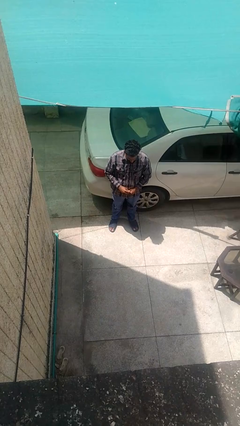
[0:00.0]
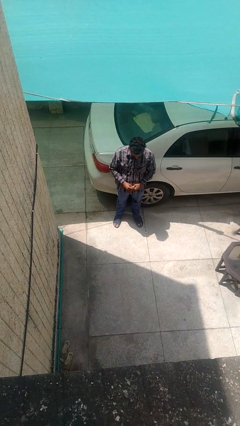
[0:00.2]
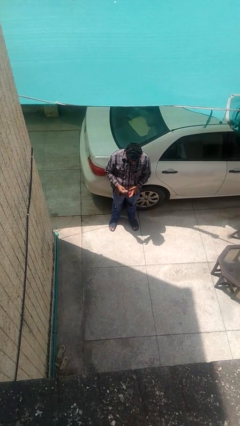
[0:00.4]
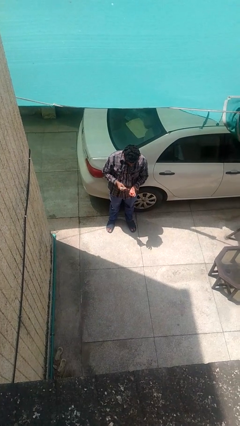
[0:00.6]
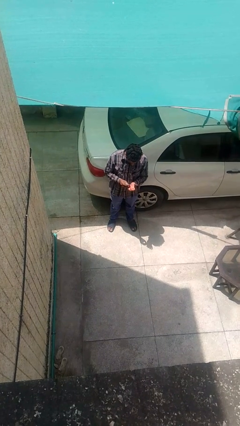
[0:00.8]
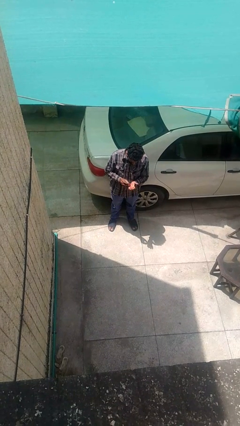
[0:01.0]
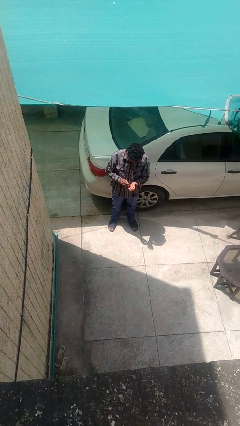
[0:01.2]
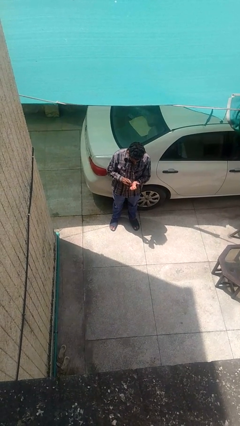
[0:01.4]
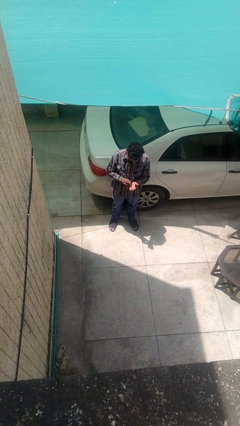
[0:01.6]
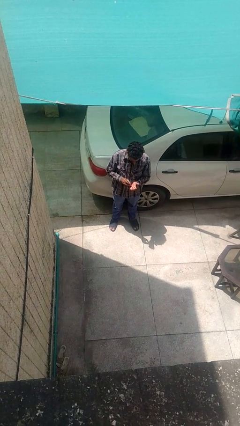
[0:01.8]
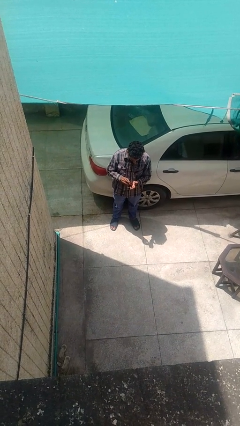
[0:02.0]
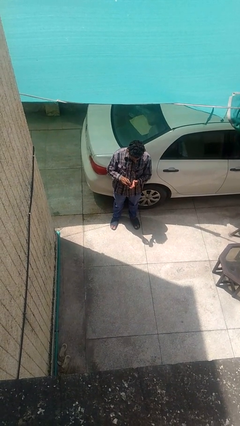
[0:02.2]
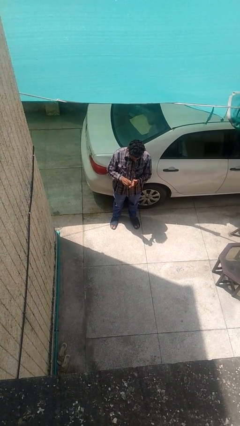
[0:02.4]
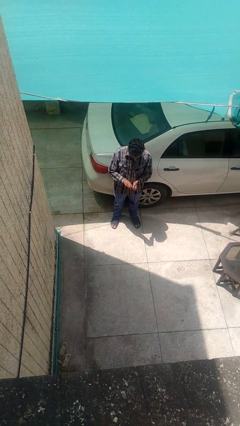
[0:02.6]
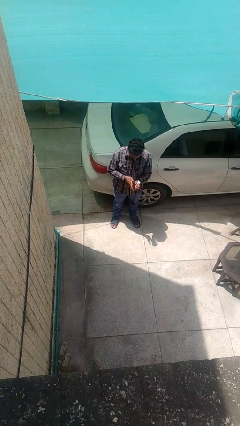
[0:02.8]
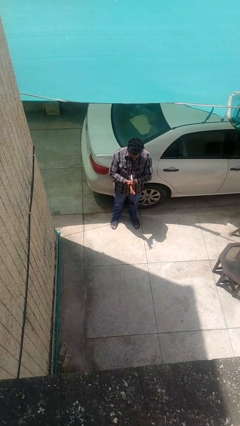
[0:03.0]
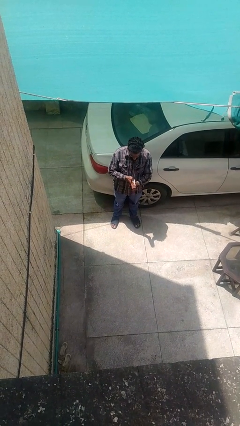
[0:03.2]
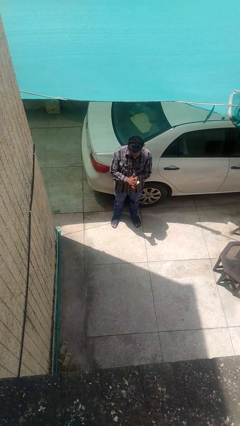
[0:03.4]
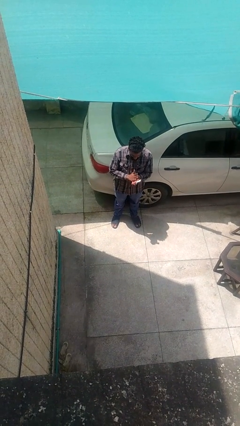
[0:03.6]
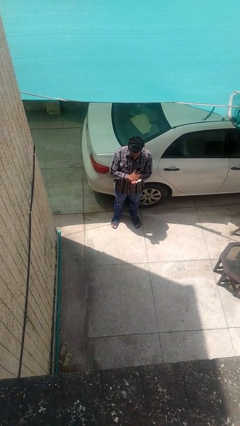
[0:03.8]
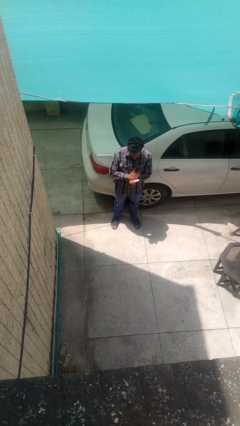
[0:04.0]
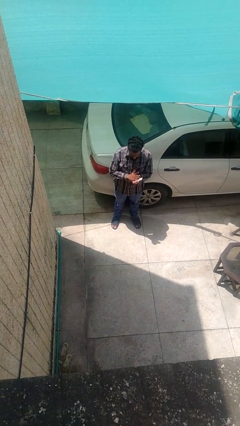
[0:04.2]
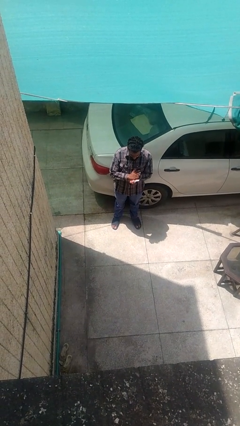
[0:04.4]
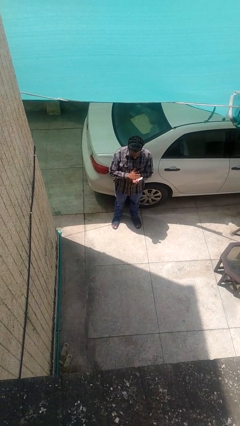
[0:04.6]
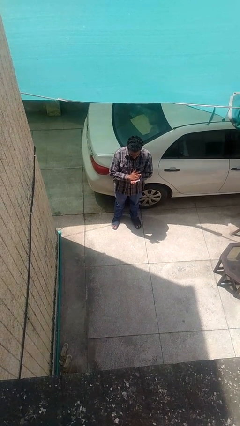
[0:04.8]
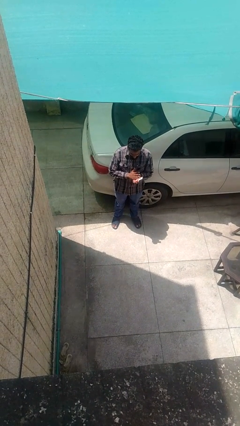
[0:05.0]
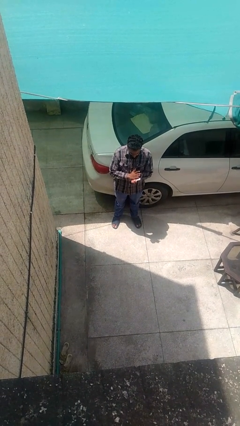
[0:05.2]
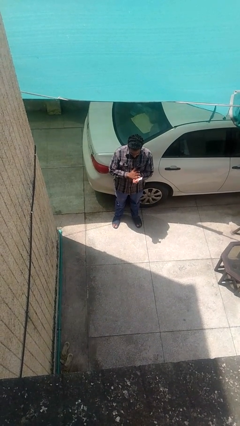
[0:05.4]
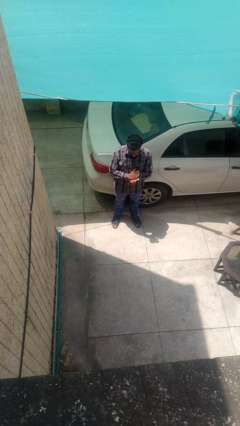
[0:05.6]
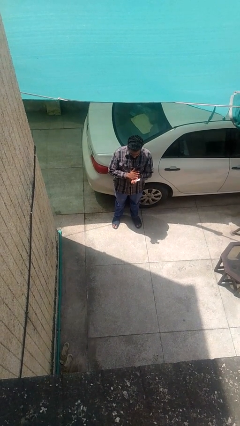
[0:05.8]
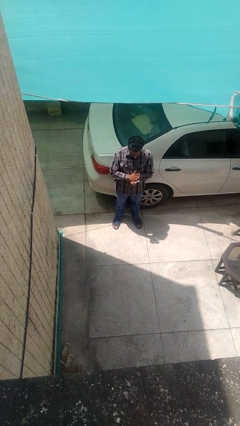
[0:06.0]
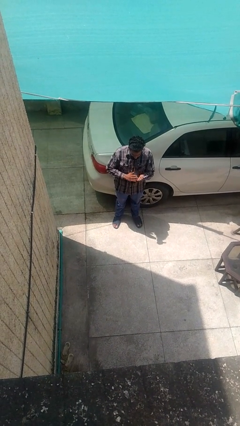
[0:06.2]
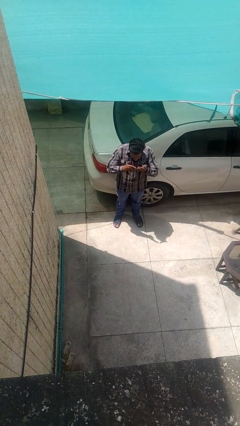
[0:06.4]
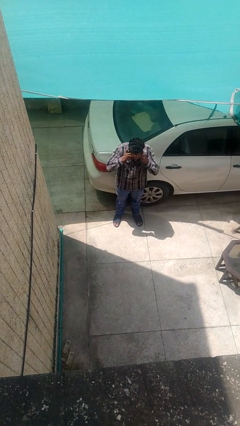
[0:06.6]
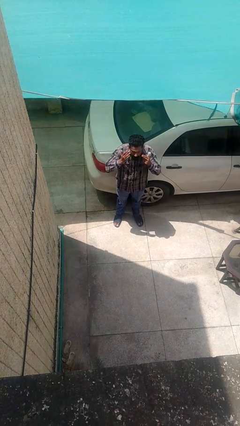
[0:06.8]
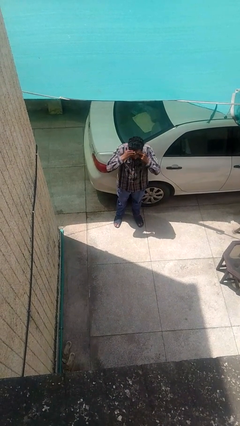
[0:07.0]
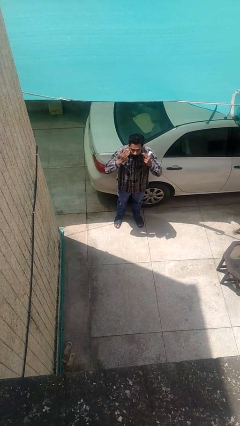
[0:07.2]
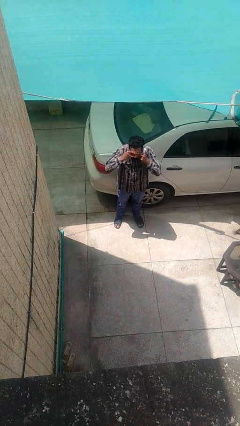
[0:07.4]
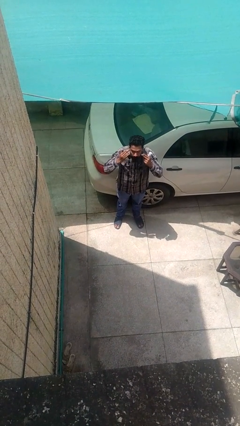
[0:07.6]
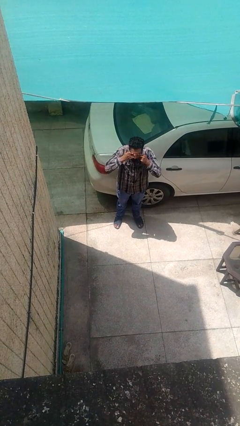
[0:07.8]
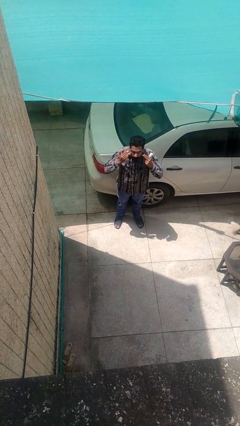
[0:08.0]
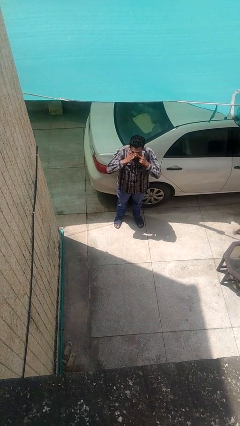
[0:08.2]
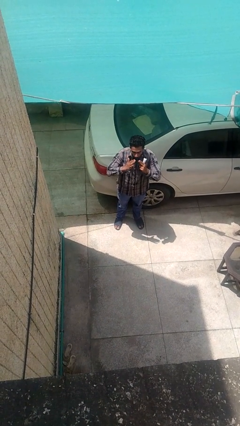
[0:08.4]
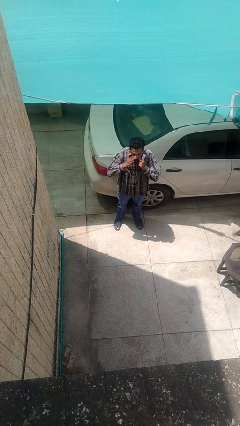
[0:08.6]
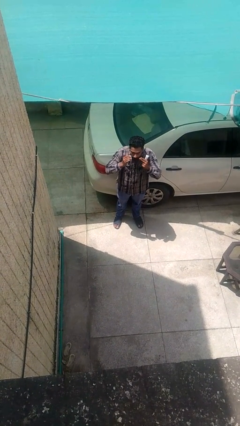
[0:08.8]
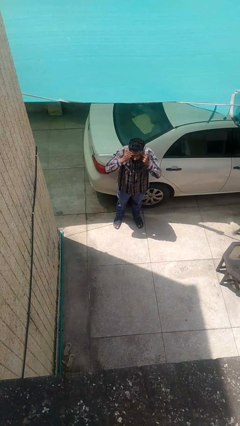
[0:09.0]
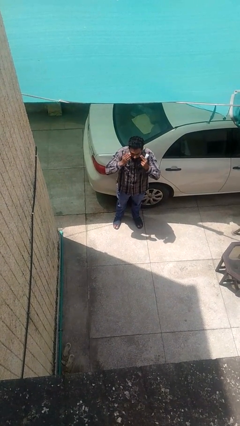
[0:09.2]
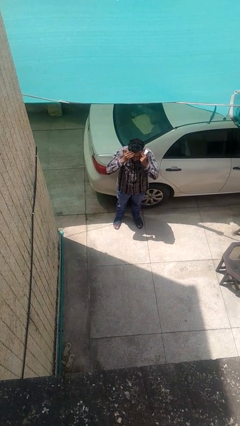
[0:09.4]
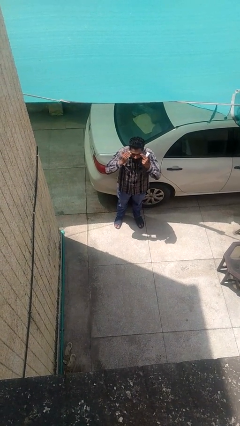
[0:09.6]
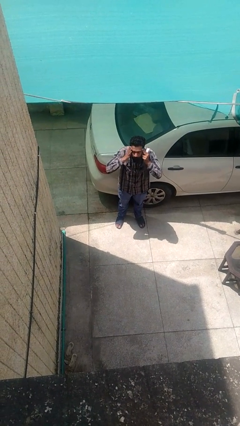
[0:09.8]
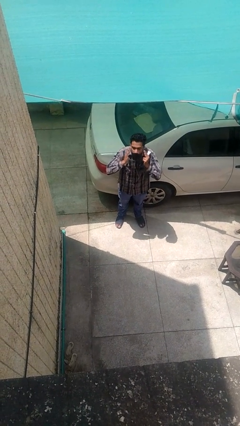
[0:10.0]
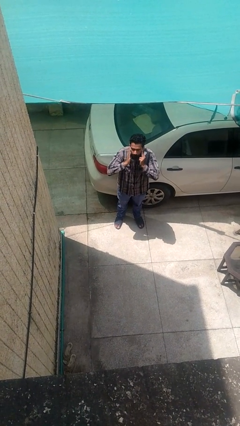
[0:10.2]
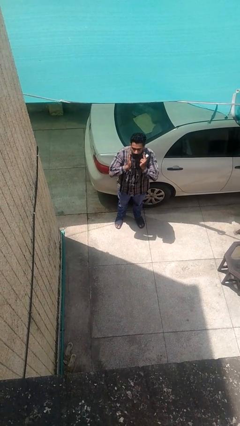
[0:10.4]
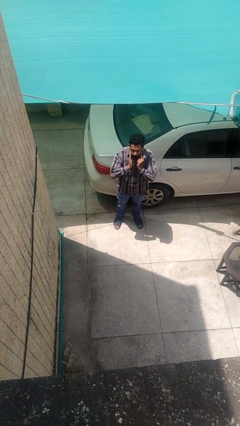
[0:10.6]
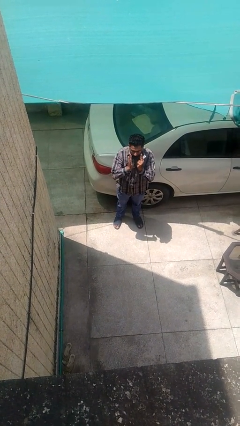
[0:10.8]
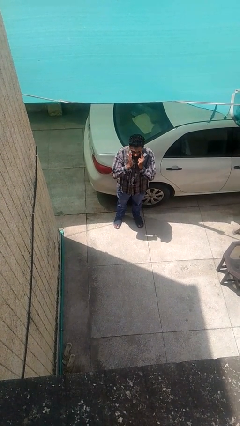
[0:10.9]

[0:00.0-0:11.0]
person applies facial moisturizer

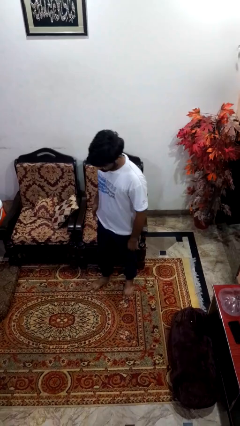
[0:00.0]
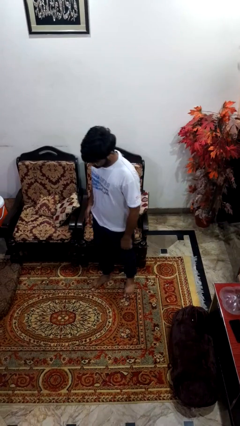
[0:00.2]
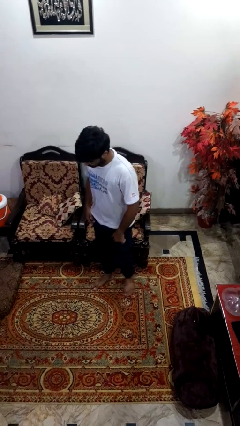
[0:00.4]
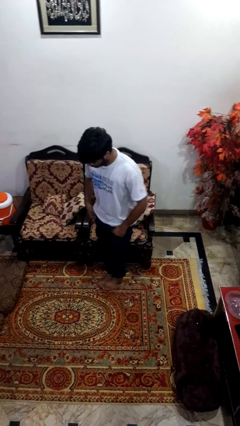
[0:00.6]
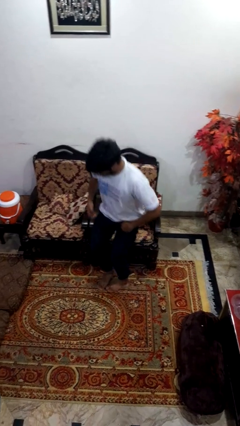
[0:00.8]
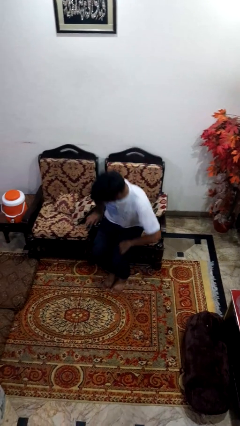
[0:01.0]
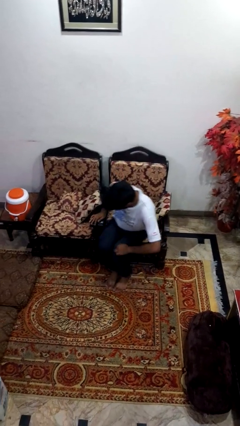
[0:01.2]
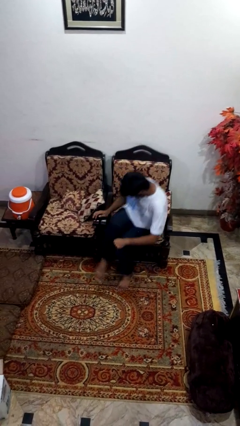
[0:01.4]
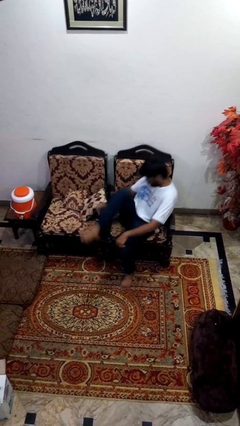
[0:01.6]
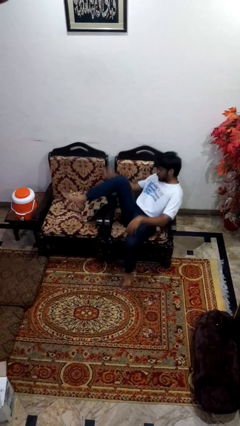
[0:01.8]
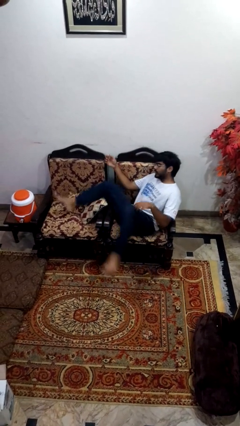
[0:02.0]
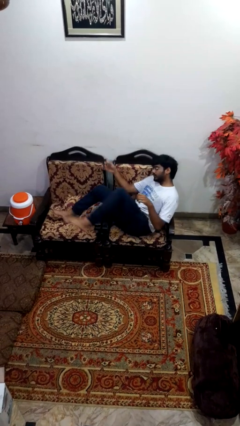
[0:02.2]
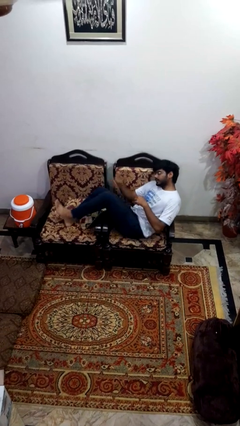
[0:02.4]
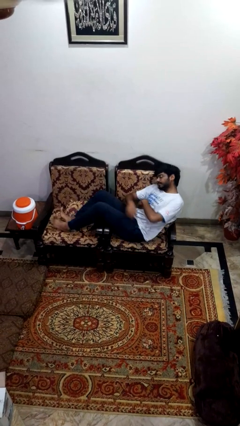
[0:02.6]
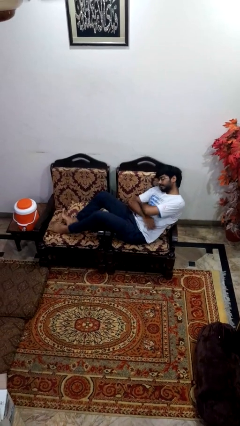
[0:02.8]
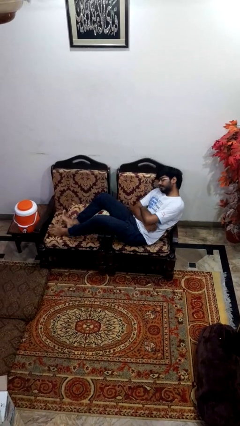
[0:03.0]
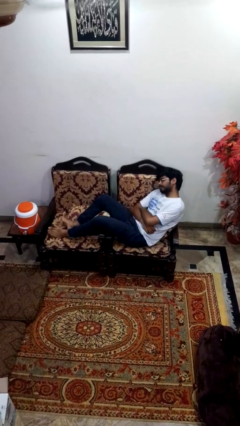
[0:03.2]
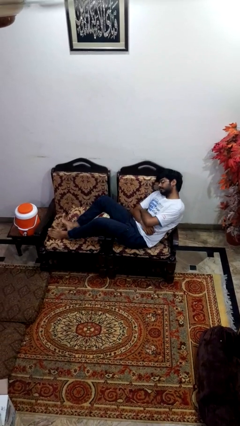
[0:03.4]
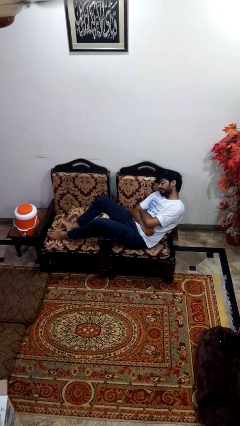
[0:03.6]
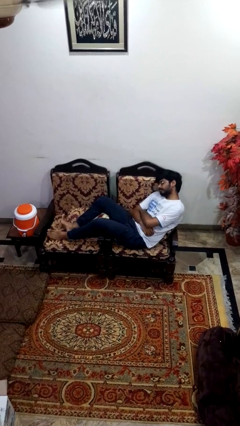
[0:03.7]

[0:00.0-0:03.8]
person lies down on couch

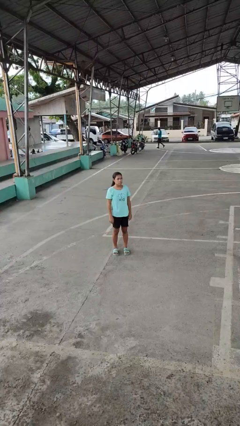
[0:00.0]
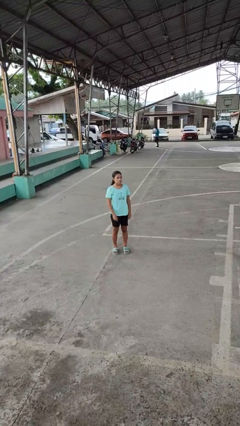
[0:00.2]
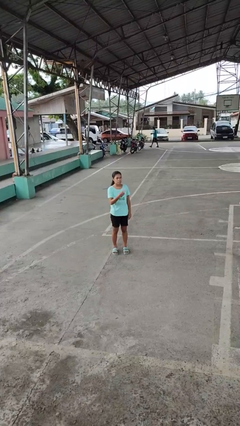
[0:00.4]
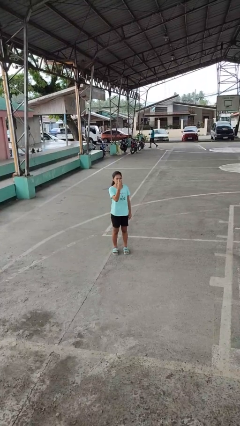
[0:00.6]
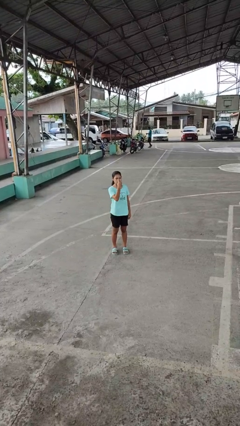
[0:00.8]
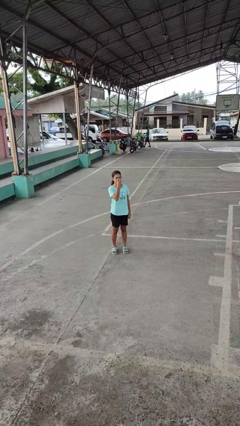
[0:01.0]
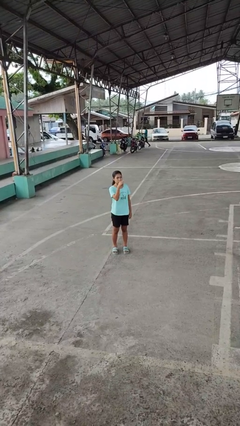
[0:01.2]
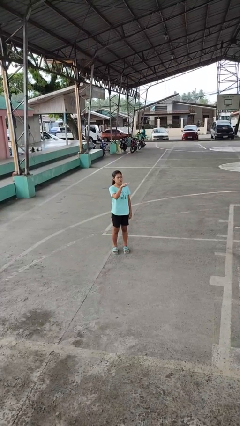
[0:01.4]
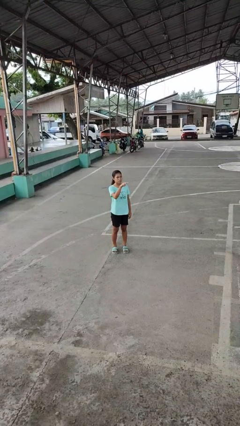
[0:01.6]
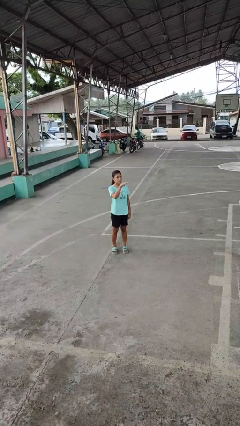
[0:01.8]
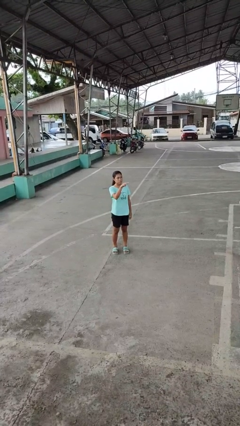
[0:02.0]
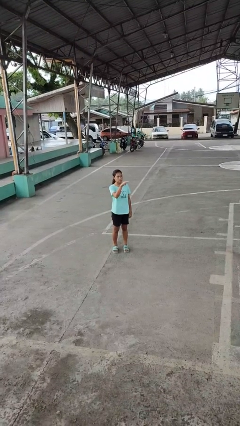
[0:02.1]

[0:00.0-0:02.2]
person gestures watch closely

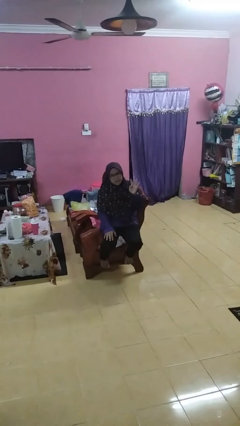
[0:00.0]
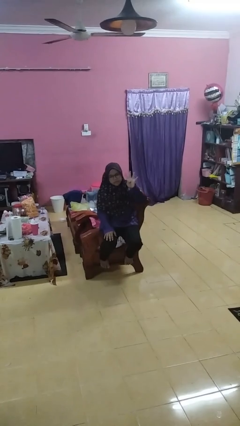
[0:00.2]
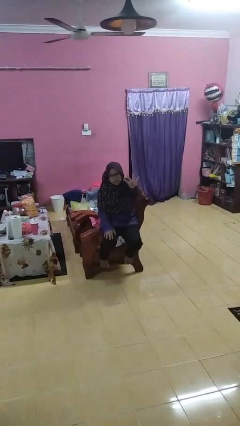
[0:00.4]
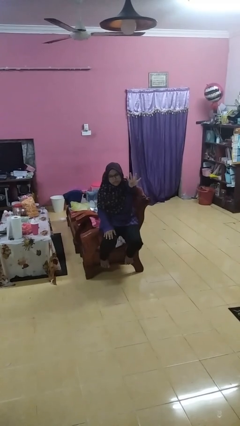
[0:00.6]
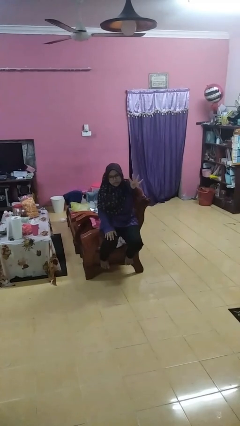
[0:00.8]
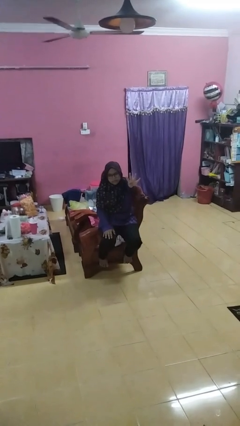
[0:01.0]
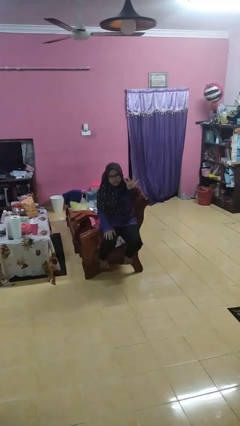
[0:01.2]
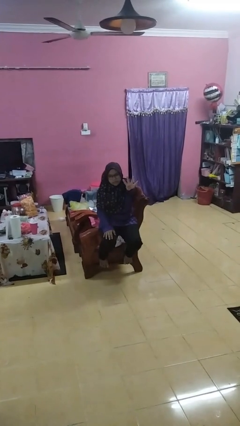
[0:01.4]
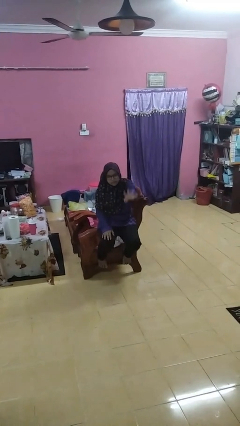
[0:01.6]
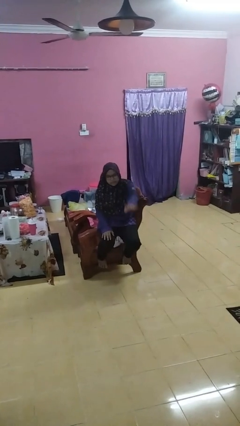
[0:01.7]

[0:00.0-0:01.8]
person gestures number four
